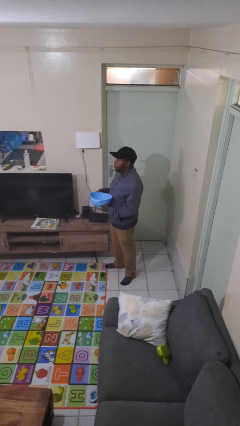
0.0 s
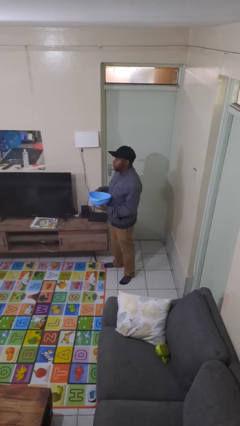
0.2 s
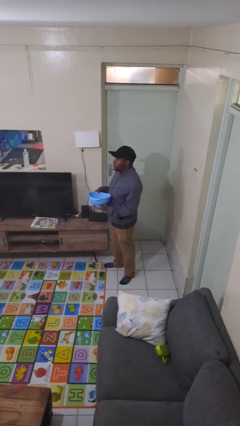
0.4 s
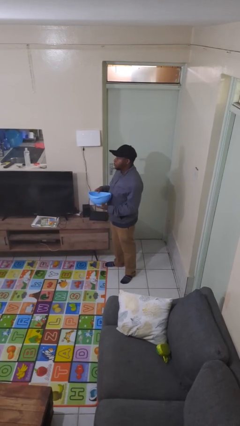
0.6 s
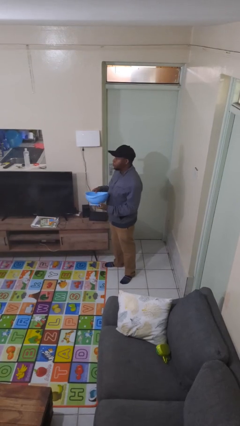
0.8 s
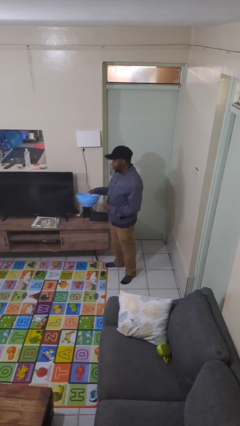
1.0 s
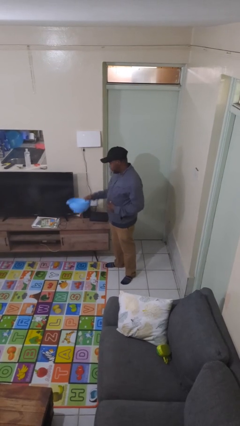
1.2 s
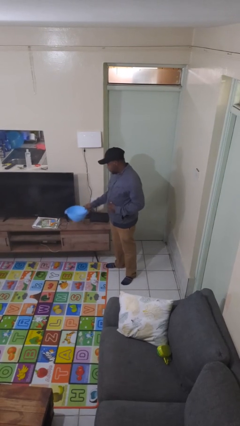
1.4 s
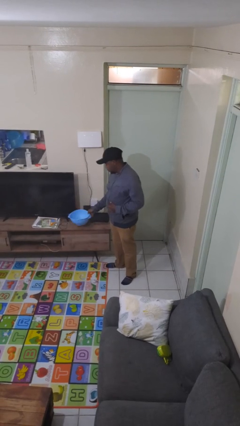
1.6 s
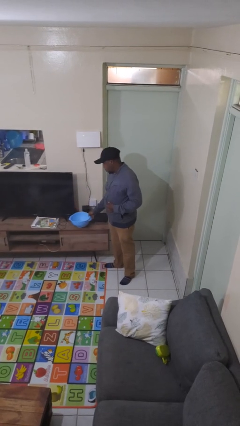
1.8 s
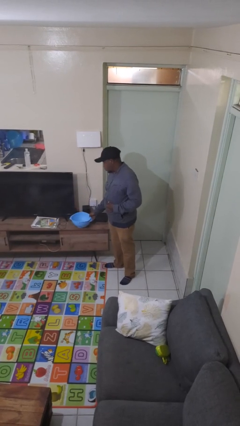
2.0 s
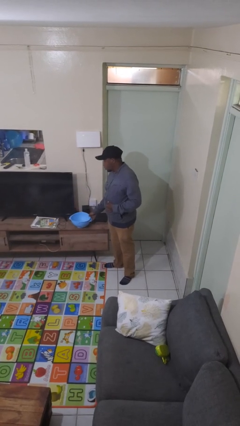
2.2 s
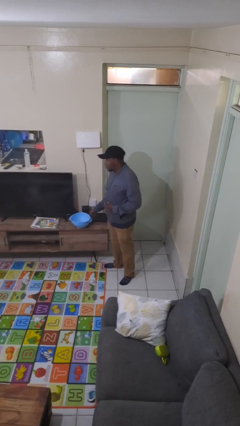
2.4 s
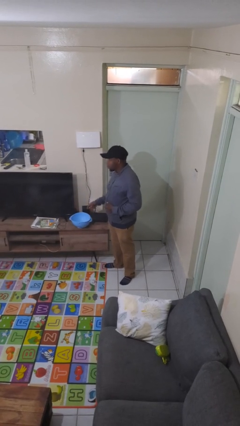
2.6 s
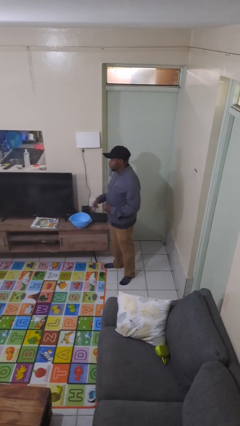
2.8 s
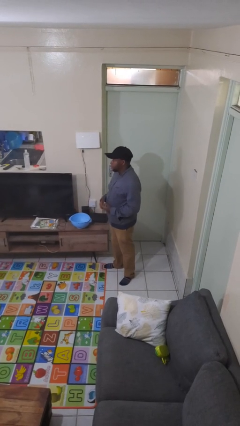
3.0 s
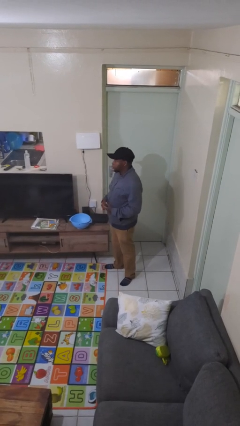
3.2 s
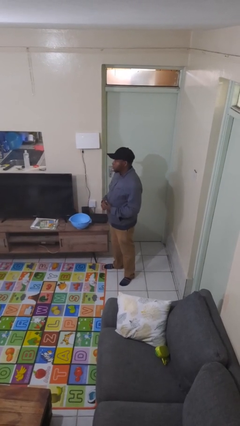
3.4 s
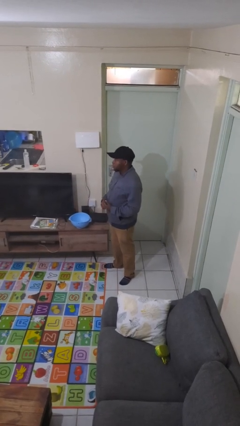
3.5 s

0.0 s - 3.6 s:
person puts down object on countertop

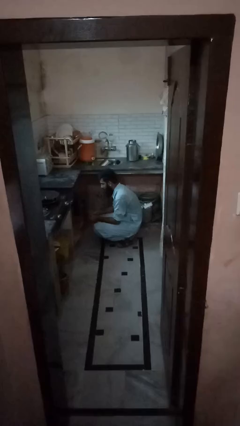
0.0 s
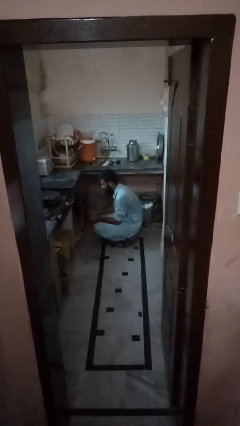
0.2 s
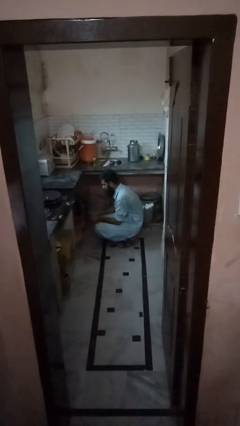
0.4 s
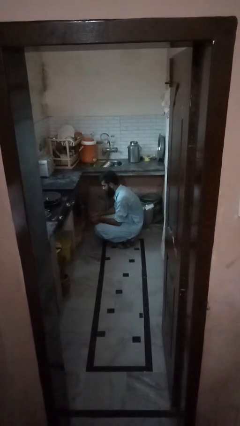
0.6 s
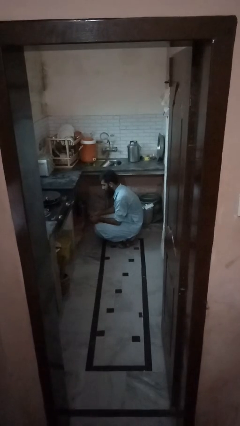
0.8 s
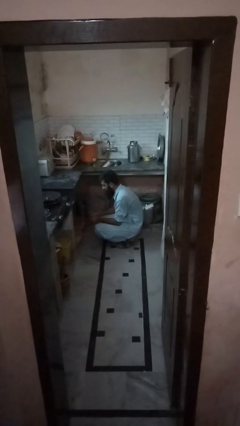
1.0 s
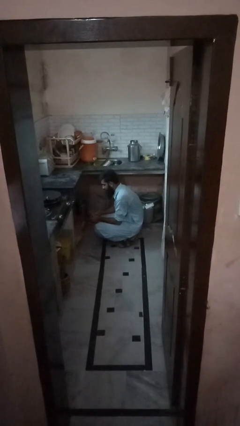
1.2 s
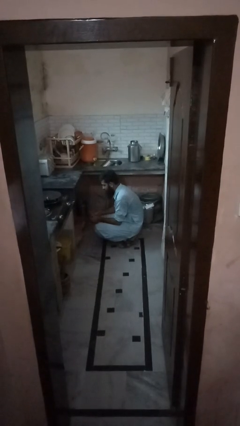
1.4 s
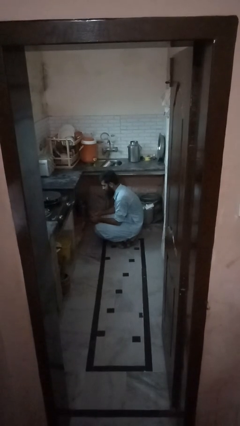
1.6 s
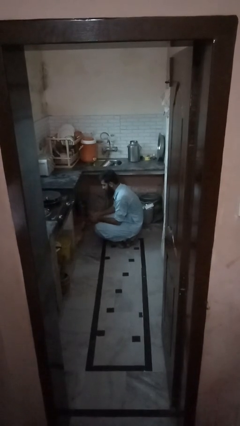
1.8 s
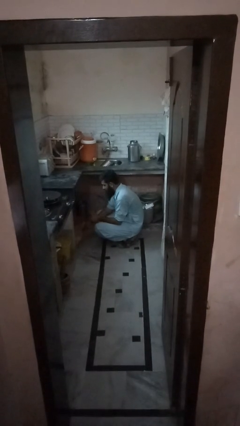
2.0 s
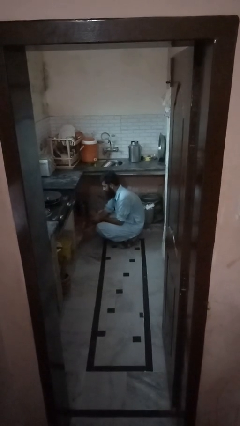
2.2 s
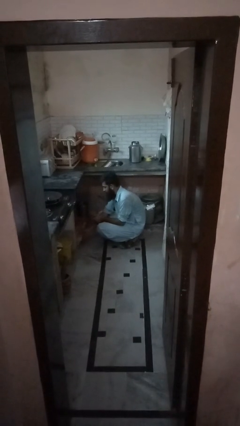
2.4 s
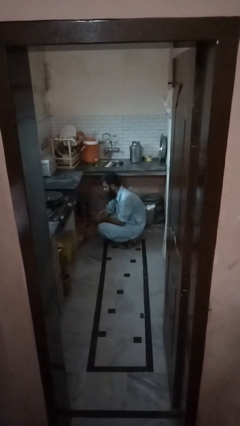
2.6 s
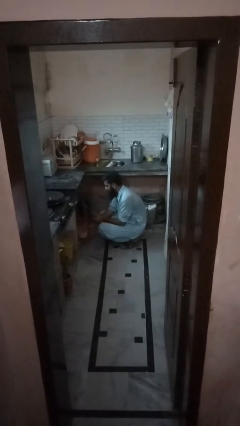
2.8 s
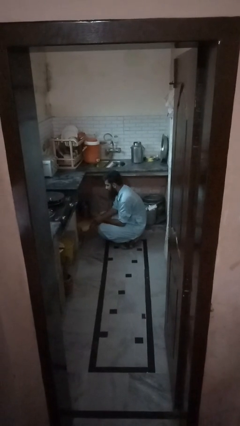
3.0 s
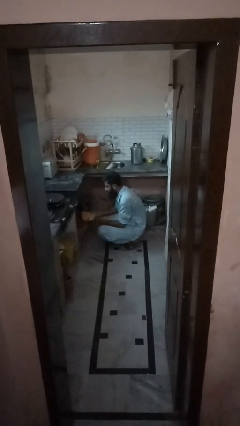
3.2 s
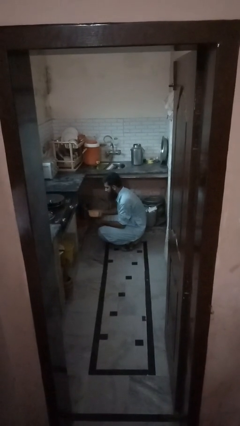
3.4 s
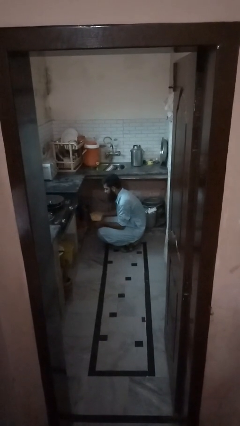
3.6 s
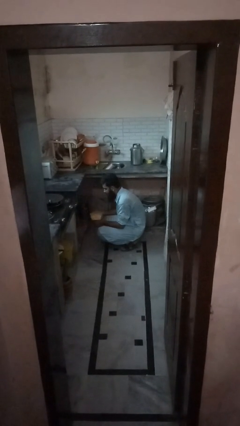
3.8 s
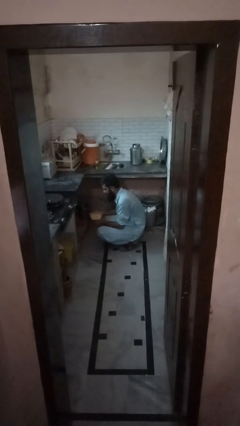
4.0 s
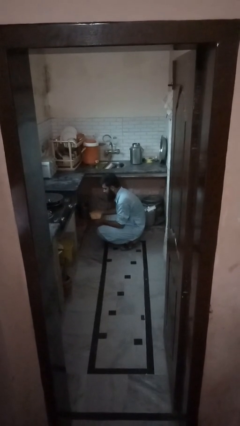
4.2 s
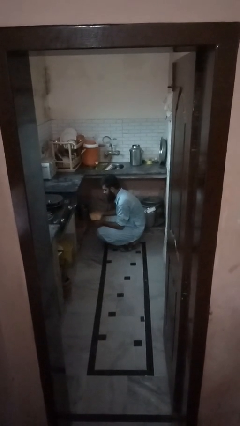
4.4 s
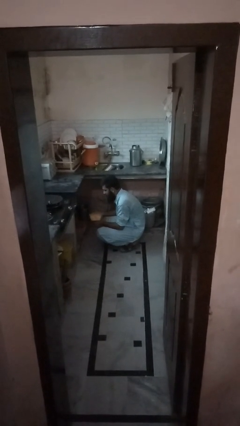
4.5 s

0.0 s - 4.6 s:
person picks up object from cabinet

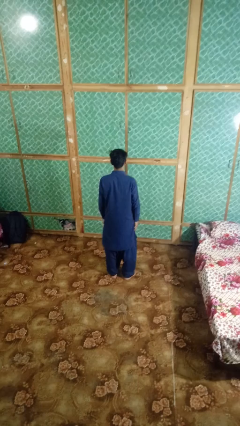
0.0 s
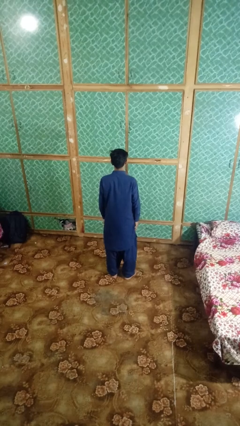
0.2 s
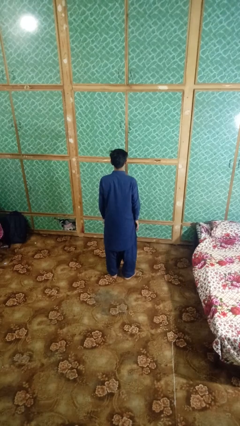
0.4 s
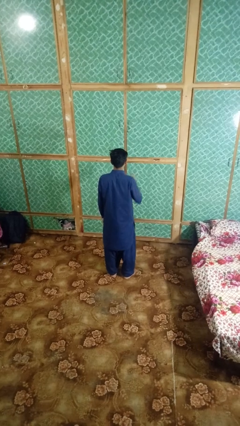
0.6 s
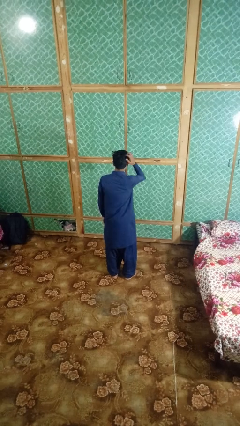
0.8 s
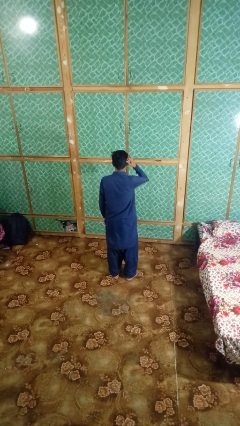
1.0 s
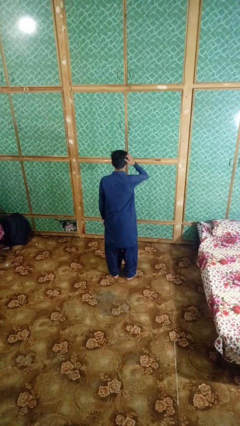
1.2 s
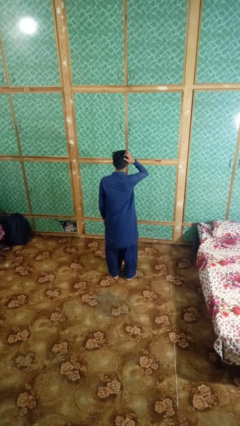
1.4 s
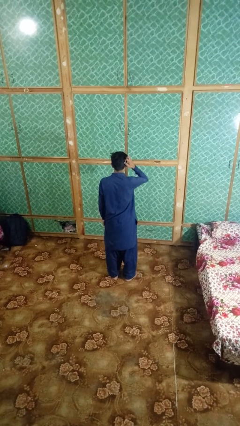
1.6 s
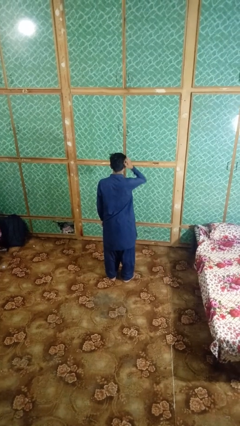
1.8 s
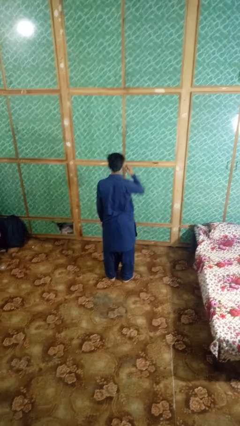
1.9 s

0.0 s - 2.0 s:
person strokes hair

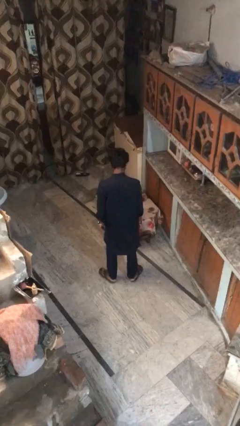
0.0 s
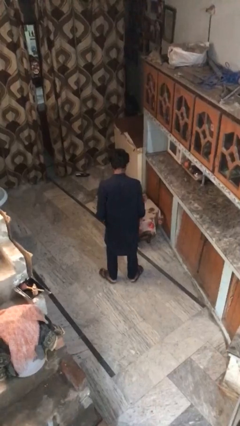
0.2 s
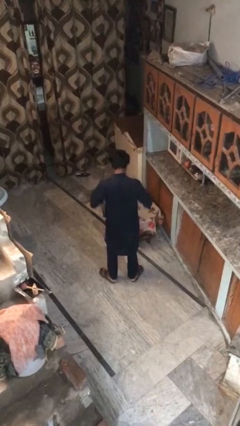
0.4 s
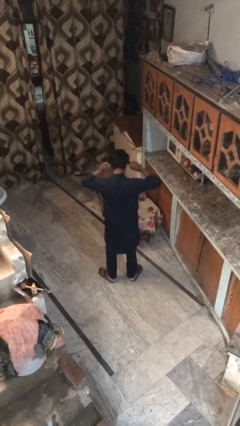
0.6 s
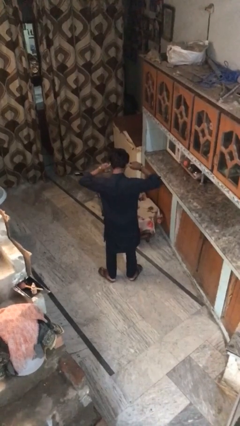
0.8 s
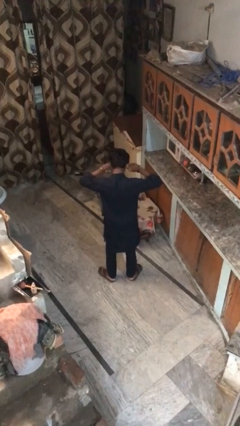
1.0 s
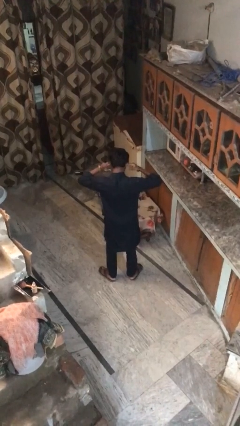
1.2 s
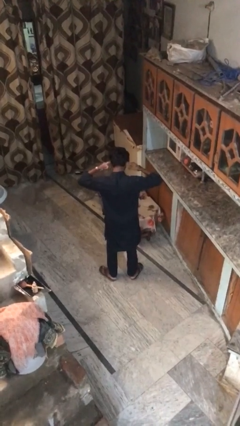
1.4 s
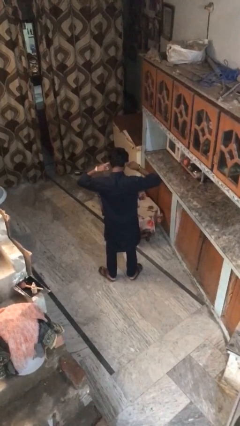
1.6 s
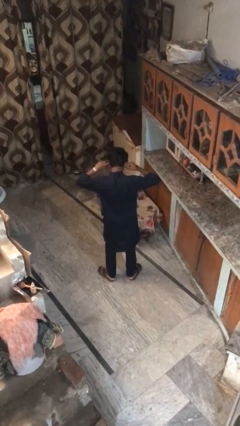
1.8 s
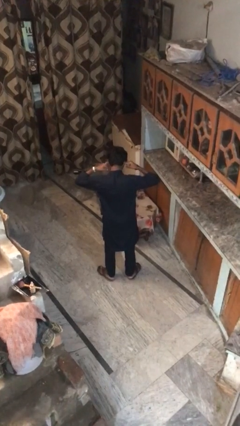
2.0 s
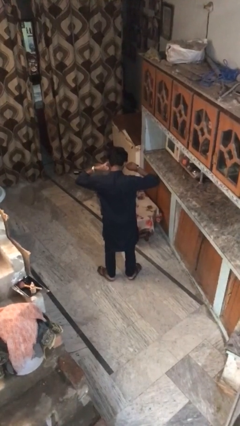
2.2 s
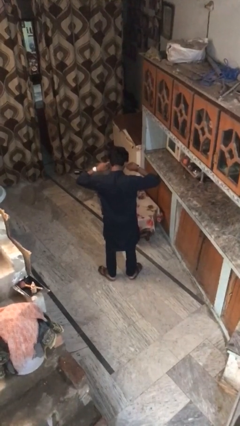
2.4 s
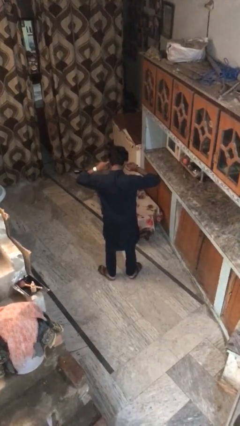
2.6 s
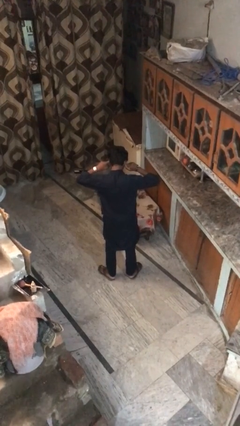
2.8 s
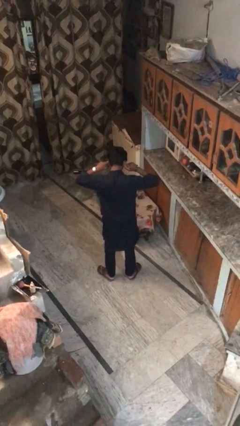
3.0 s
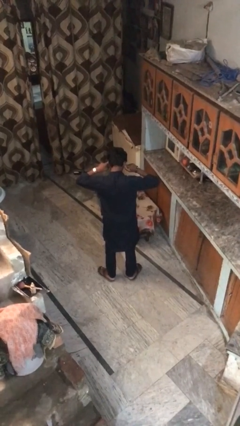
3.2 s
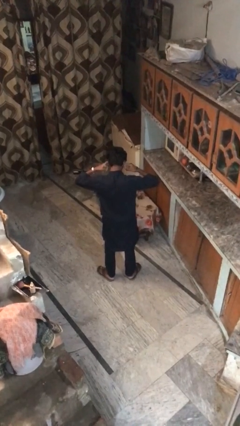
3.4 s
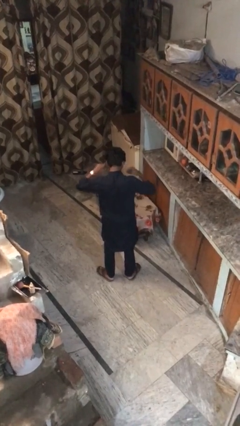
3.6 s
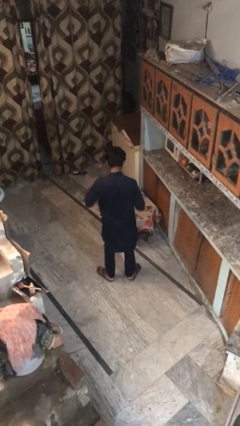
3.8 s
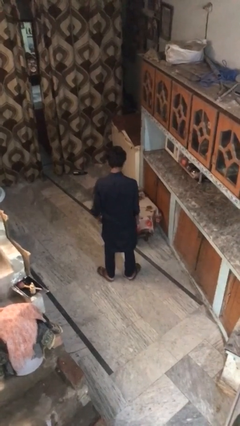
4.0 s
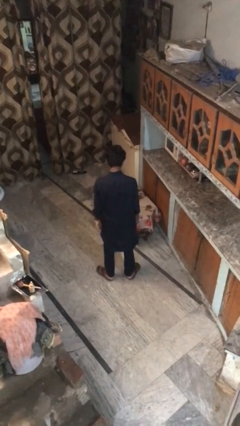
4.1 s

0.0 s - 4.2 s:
person puts fingers in ear

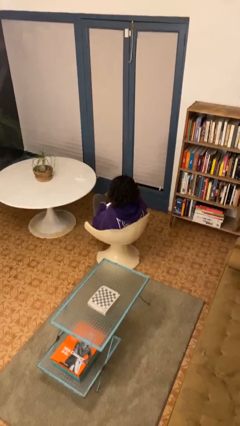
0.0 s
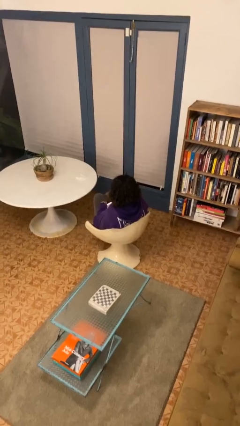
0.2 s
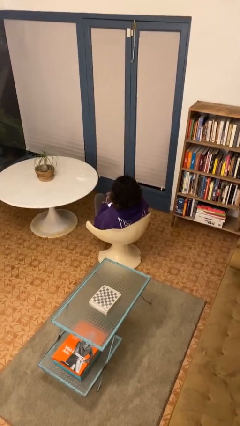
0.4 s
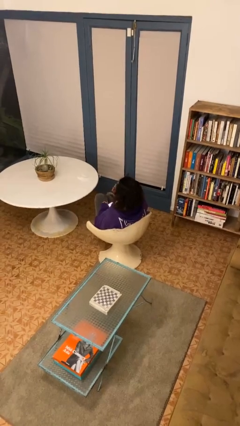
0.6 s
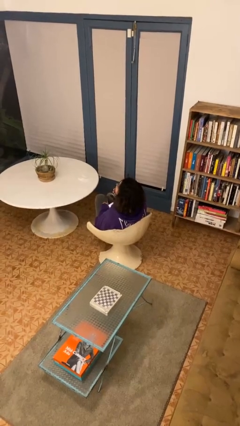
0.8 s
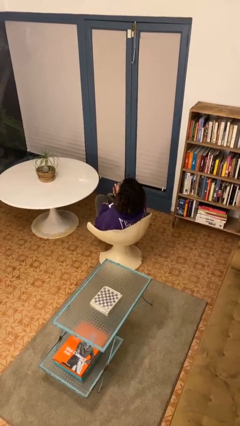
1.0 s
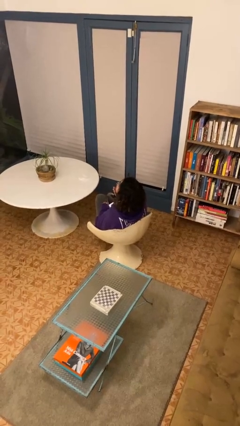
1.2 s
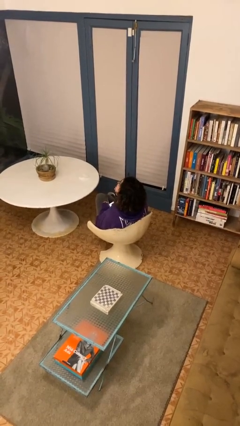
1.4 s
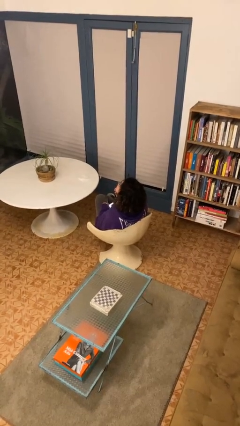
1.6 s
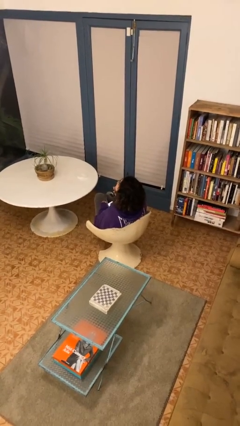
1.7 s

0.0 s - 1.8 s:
person strokes chin

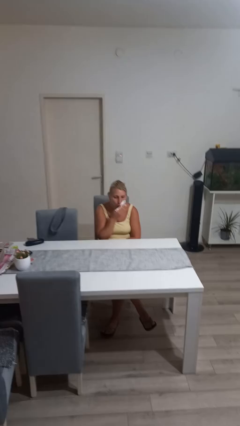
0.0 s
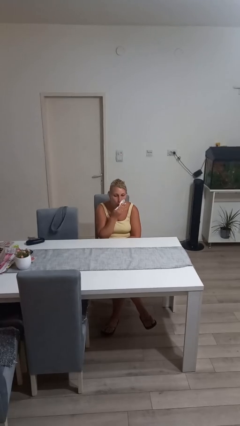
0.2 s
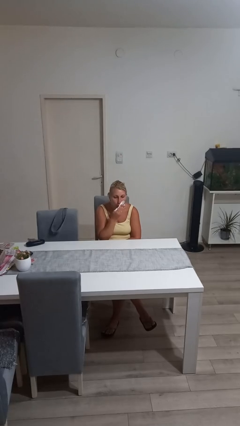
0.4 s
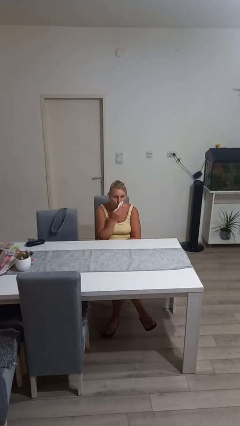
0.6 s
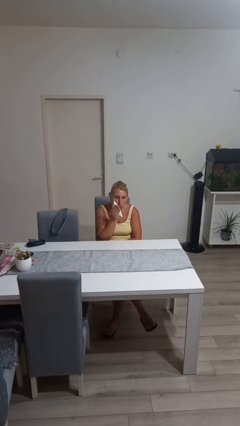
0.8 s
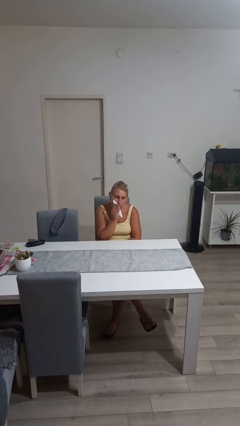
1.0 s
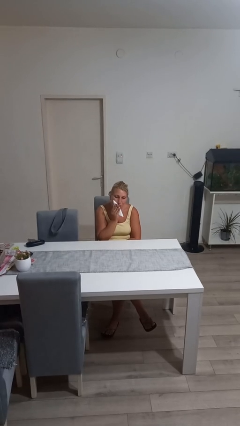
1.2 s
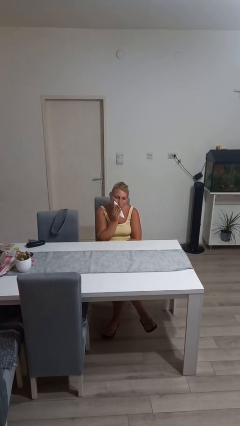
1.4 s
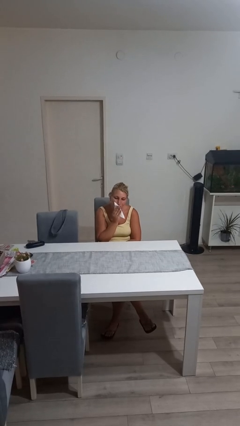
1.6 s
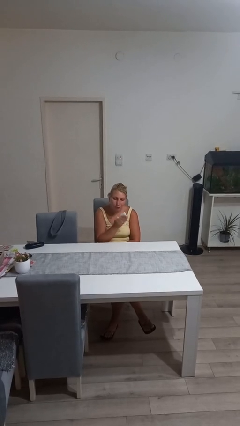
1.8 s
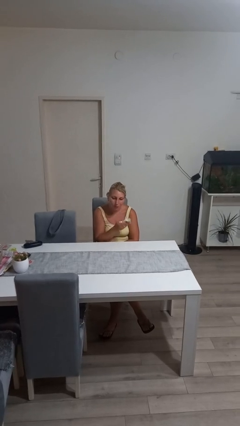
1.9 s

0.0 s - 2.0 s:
person wipes mouth with napkin
